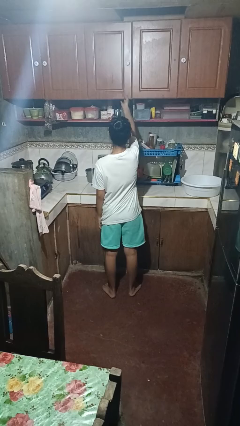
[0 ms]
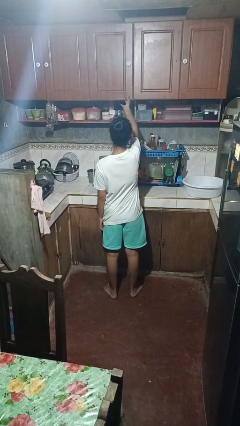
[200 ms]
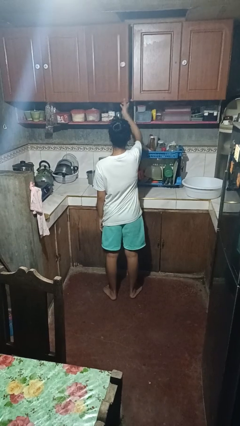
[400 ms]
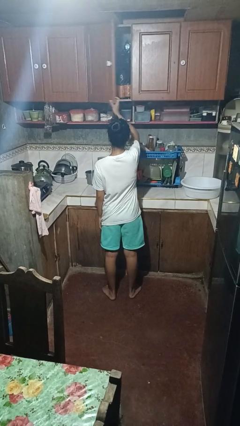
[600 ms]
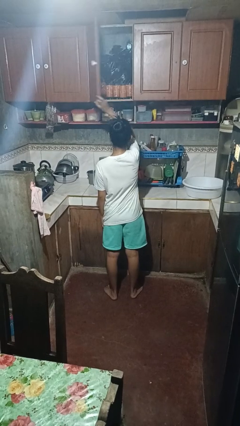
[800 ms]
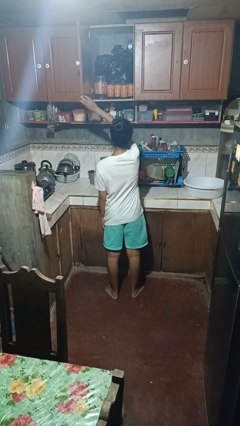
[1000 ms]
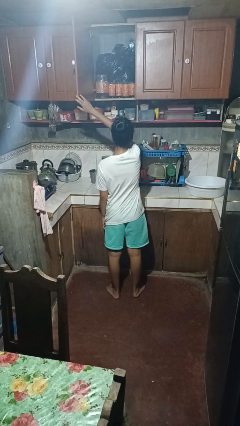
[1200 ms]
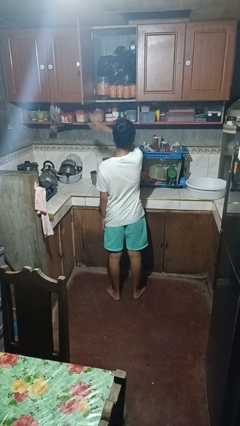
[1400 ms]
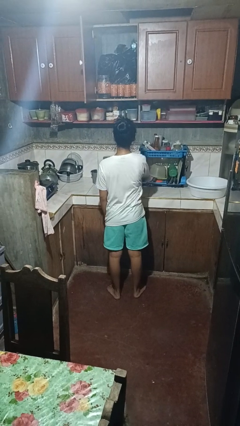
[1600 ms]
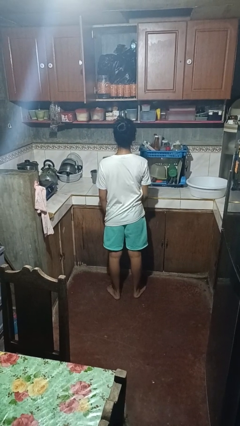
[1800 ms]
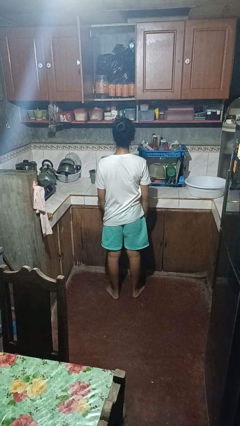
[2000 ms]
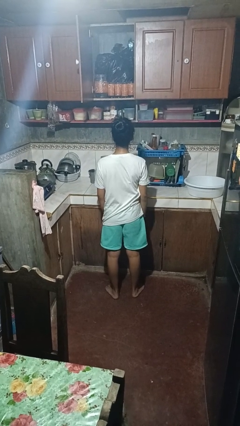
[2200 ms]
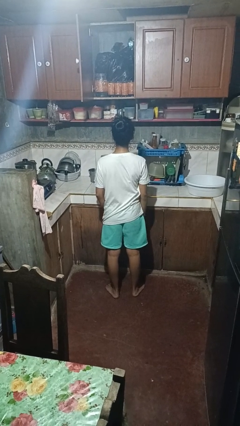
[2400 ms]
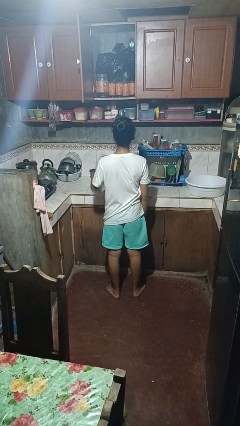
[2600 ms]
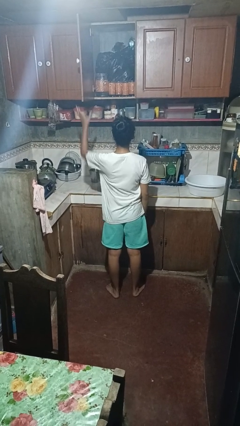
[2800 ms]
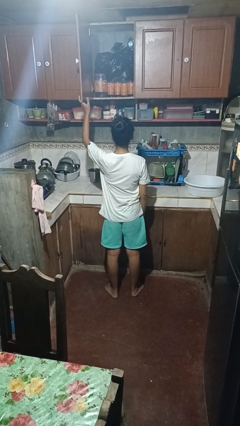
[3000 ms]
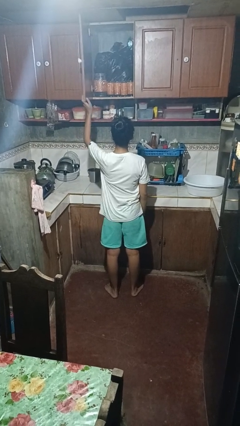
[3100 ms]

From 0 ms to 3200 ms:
person opens cabinet

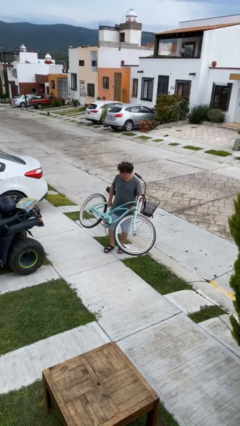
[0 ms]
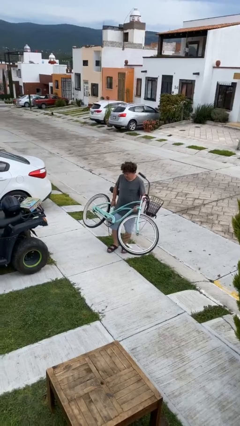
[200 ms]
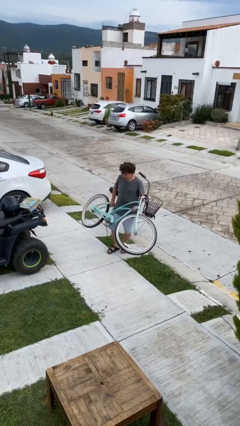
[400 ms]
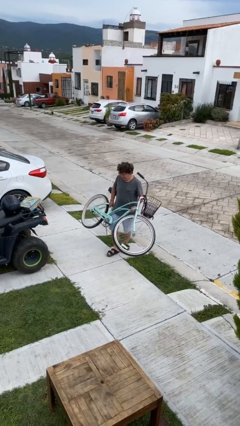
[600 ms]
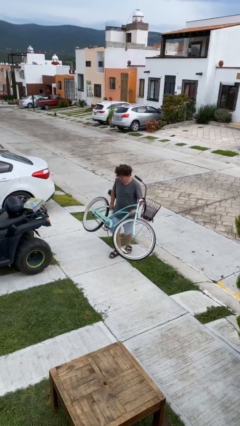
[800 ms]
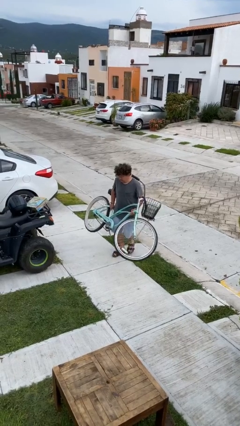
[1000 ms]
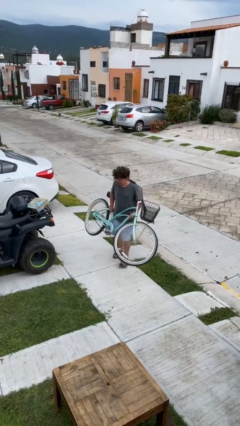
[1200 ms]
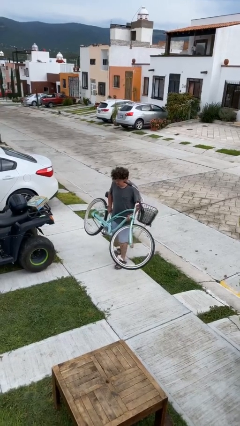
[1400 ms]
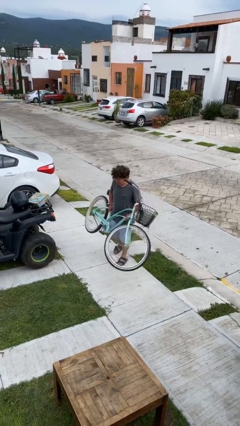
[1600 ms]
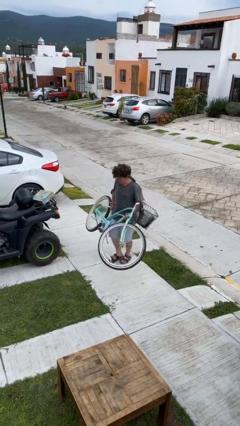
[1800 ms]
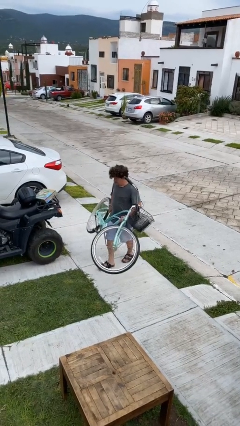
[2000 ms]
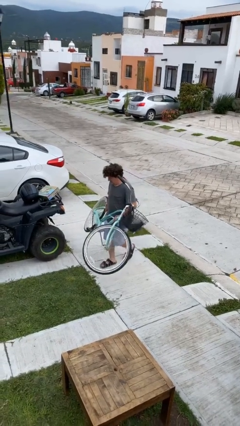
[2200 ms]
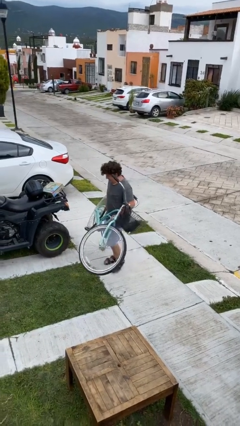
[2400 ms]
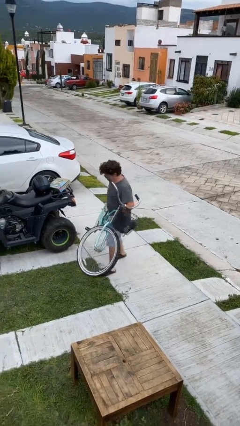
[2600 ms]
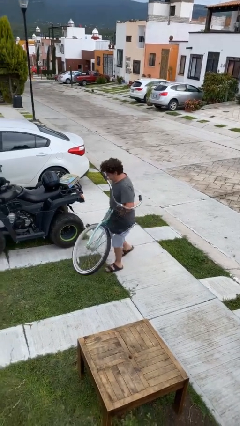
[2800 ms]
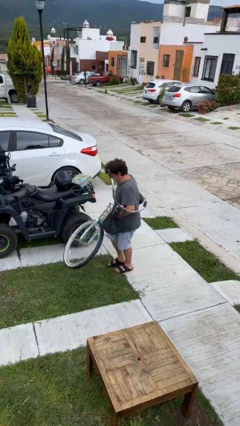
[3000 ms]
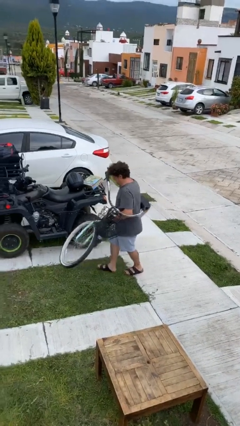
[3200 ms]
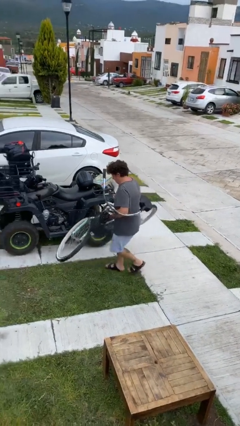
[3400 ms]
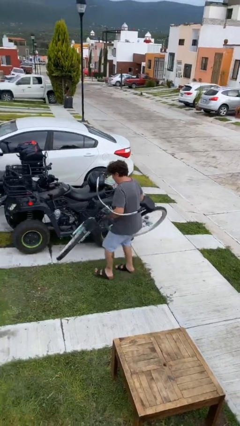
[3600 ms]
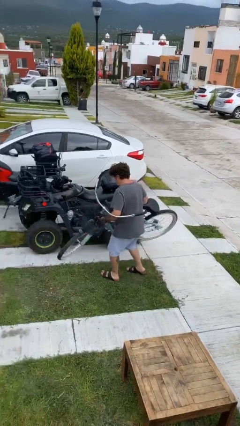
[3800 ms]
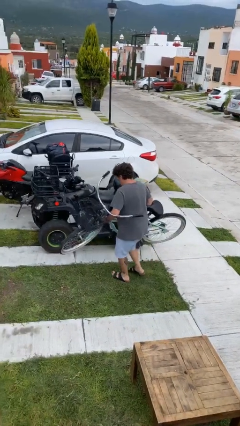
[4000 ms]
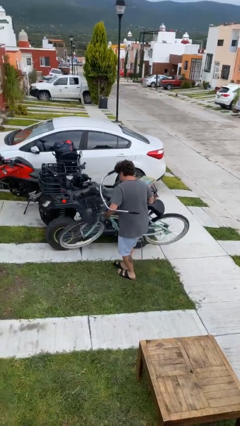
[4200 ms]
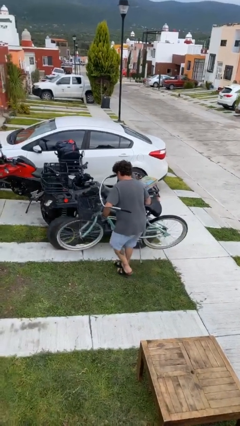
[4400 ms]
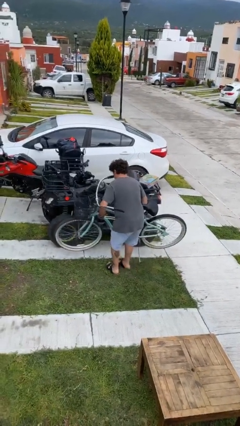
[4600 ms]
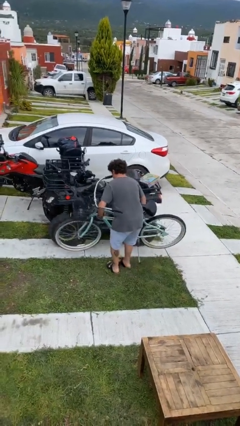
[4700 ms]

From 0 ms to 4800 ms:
person carries heavy object

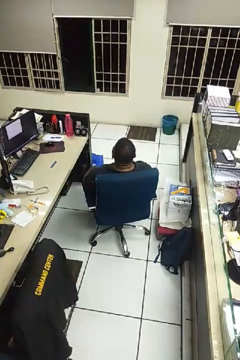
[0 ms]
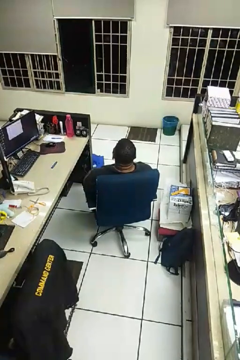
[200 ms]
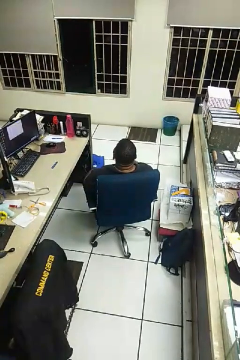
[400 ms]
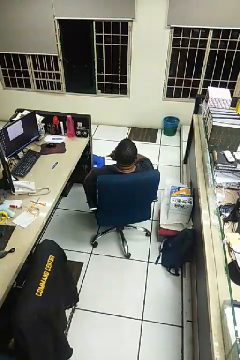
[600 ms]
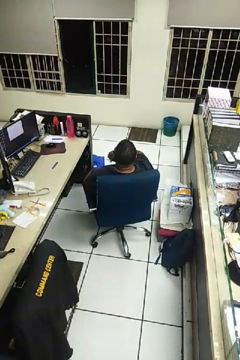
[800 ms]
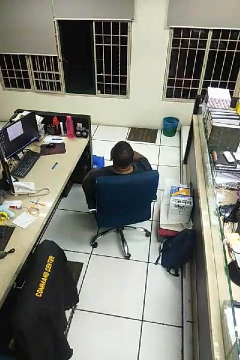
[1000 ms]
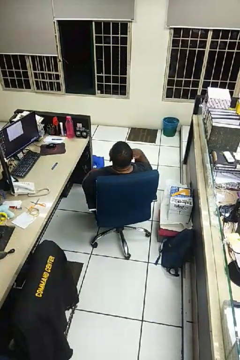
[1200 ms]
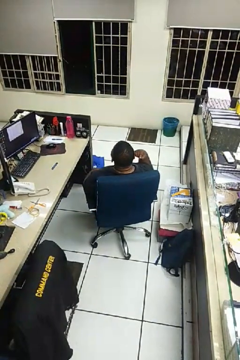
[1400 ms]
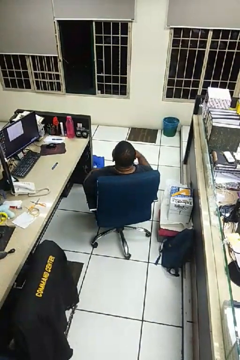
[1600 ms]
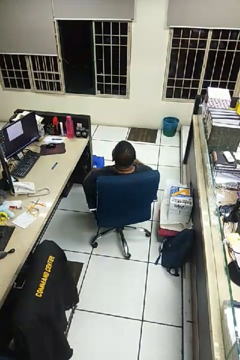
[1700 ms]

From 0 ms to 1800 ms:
person gestures cut

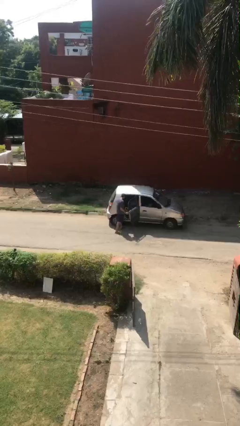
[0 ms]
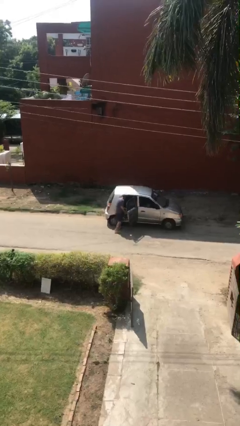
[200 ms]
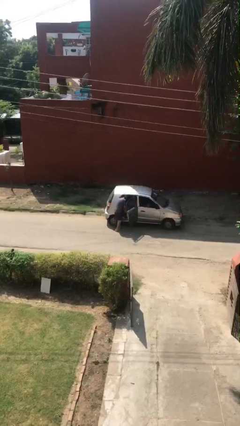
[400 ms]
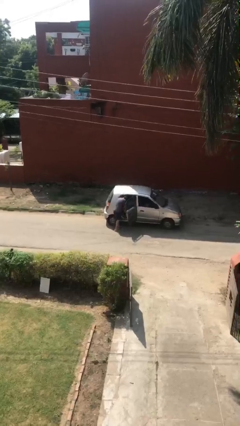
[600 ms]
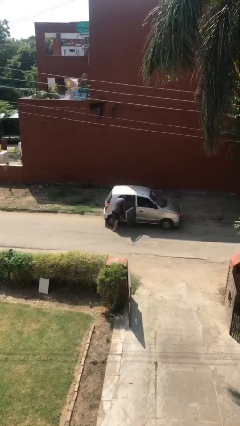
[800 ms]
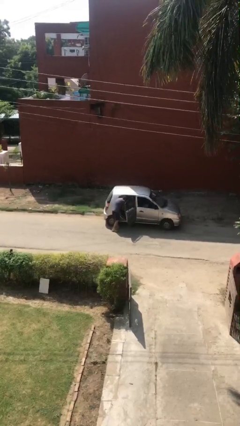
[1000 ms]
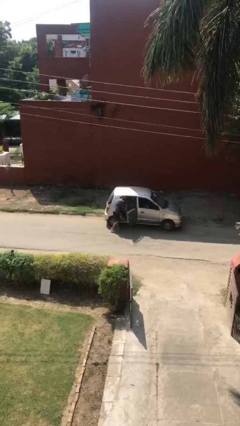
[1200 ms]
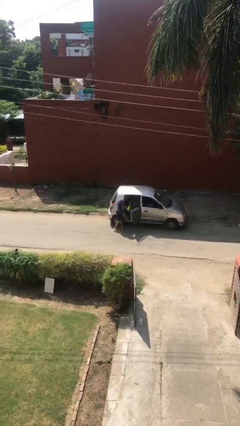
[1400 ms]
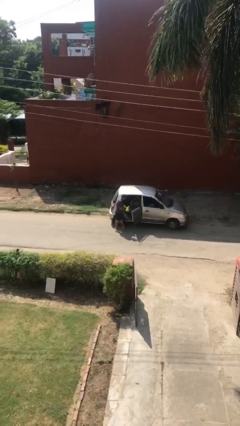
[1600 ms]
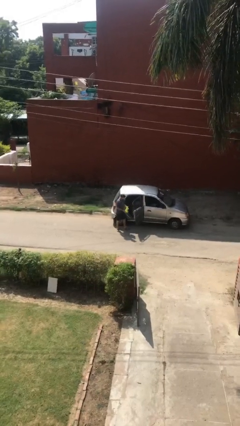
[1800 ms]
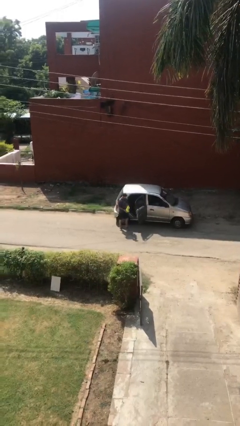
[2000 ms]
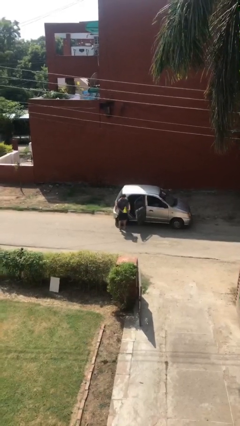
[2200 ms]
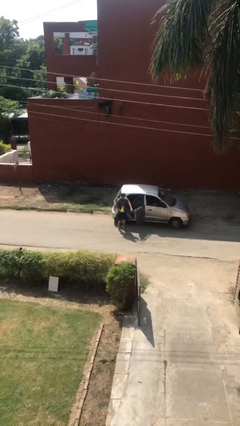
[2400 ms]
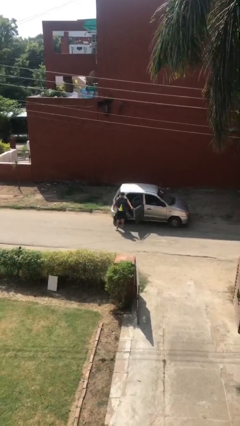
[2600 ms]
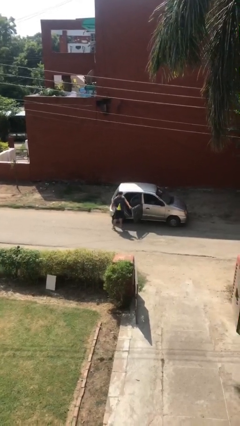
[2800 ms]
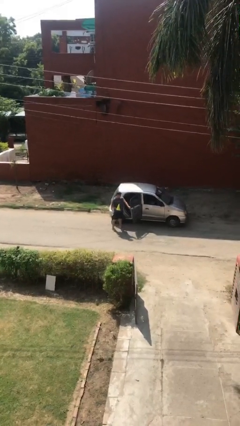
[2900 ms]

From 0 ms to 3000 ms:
person unloads car

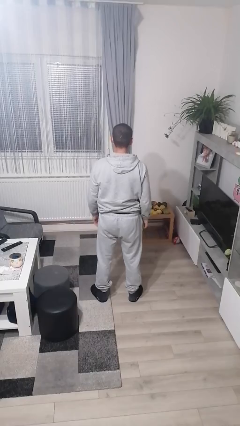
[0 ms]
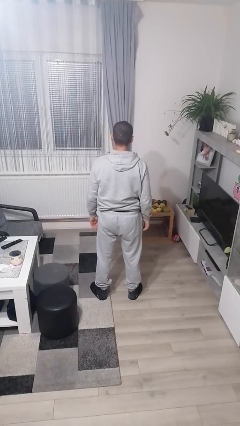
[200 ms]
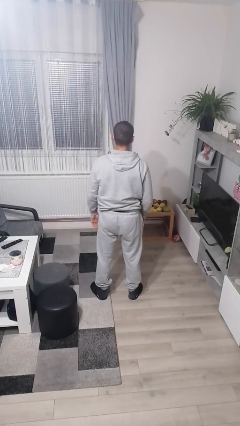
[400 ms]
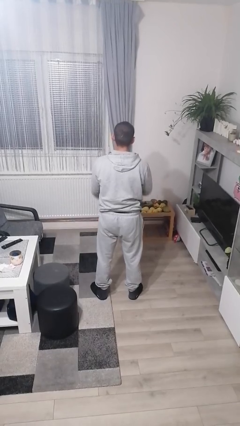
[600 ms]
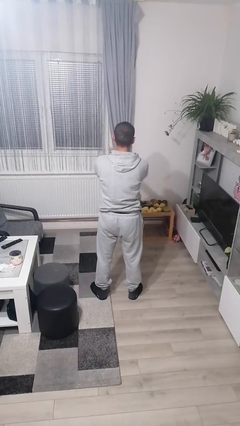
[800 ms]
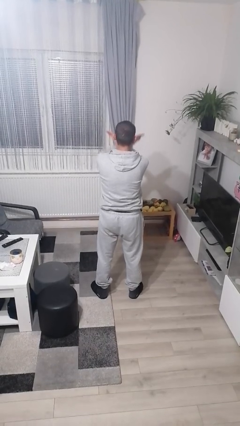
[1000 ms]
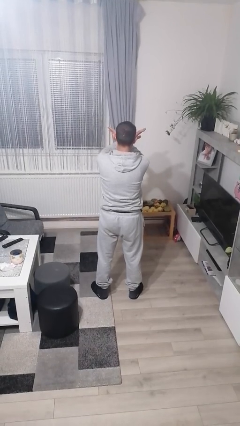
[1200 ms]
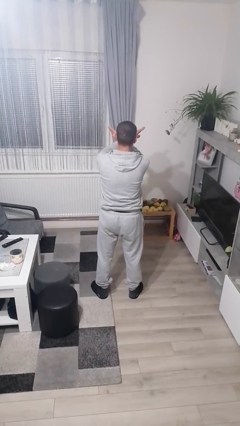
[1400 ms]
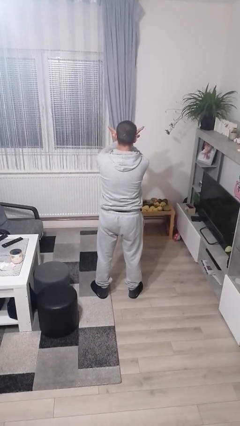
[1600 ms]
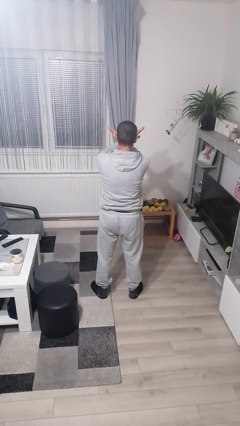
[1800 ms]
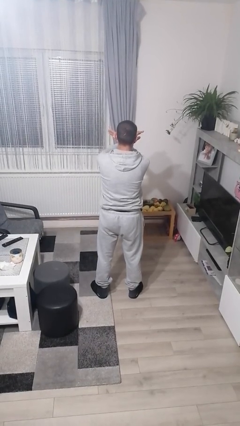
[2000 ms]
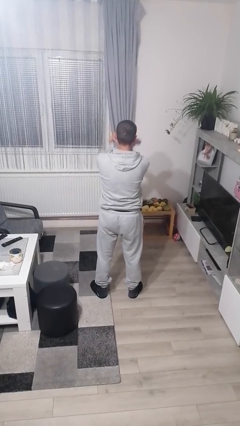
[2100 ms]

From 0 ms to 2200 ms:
person gestures arms x

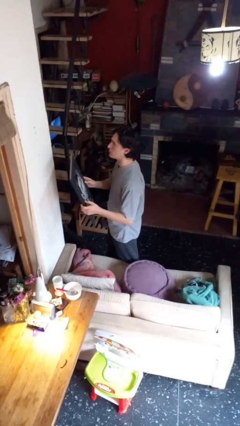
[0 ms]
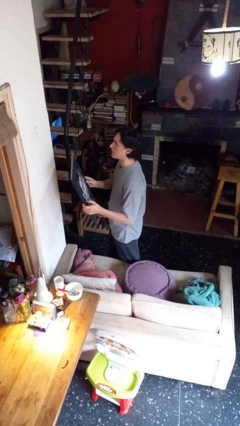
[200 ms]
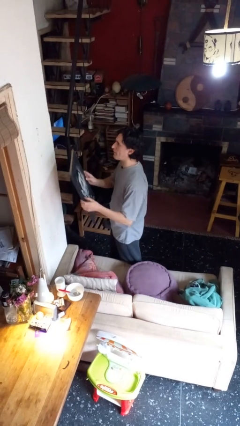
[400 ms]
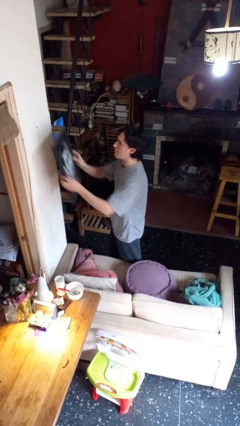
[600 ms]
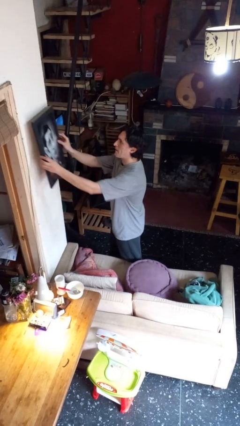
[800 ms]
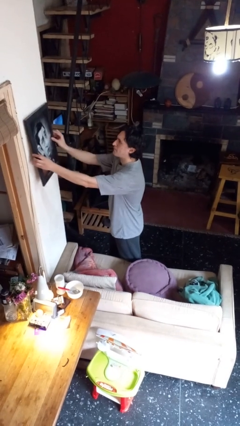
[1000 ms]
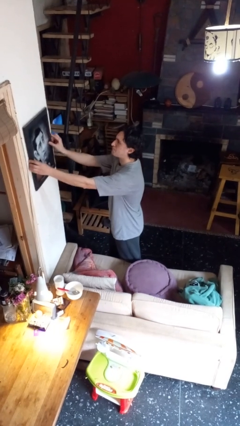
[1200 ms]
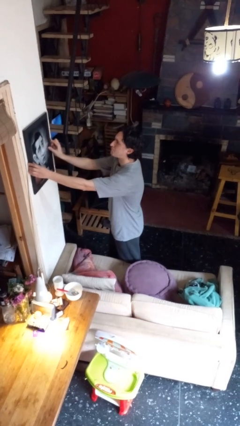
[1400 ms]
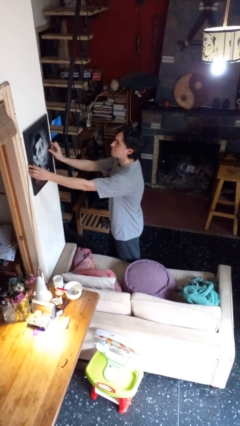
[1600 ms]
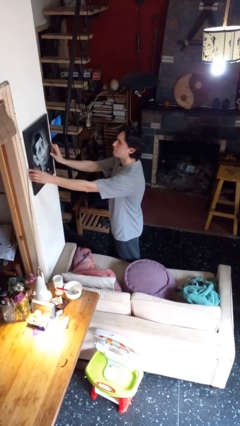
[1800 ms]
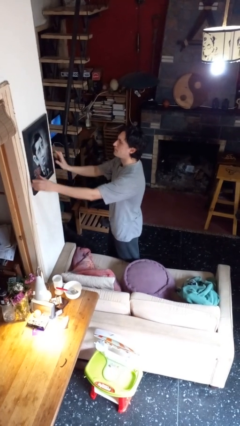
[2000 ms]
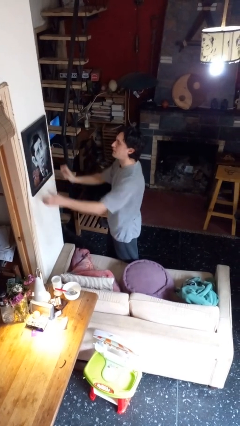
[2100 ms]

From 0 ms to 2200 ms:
person puts up picture frame
